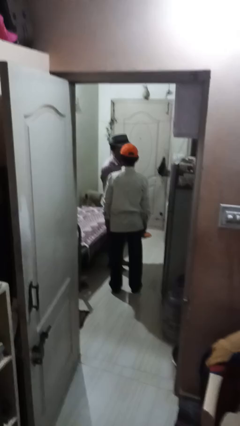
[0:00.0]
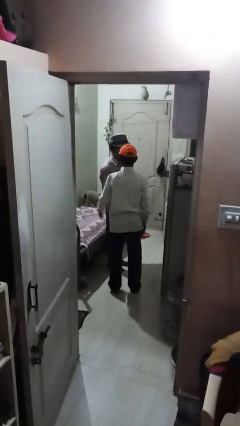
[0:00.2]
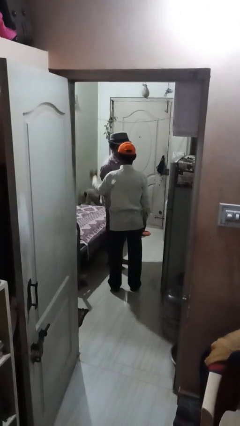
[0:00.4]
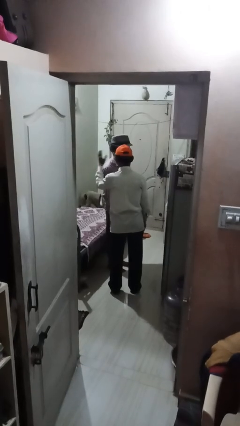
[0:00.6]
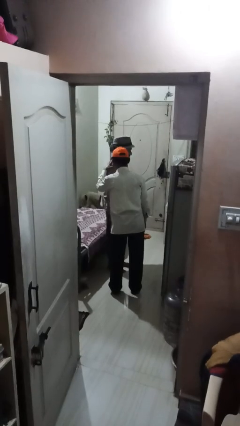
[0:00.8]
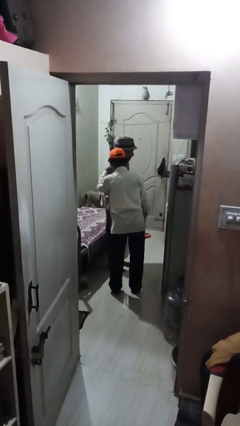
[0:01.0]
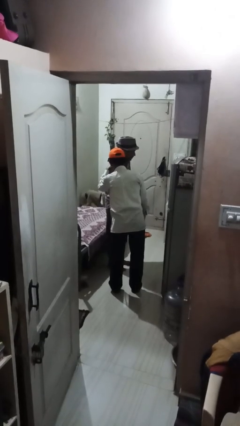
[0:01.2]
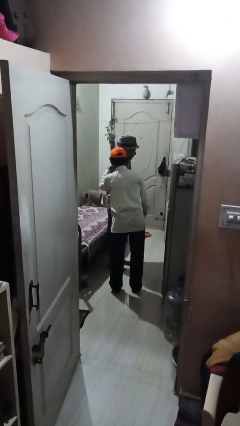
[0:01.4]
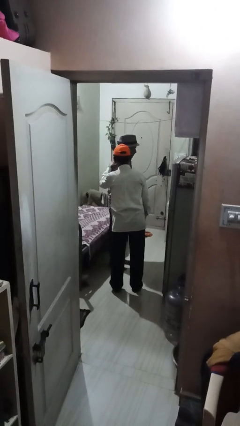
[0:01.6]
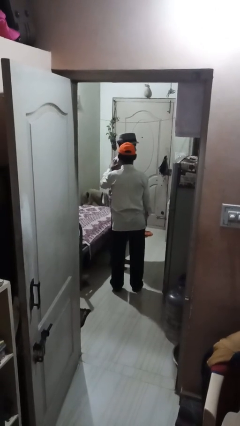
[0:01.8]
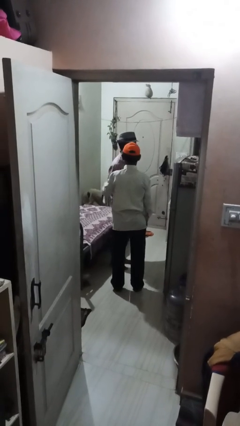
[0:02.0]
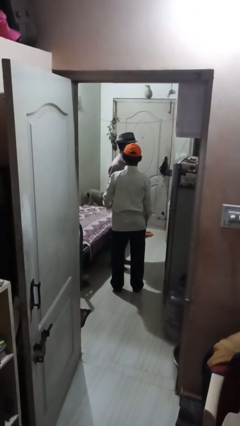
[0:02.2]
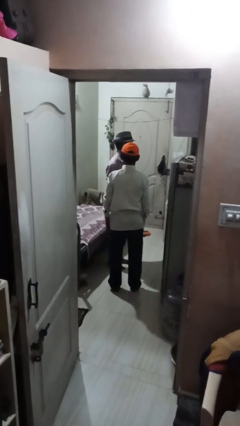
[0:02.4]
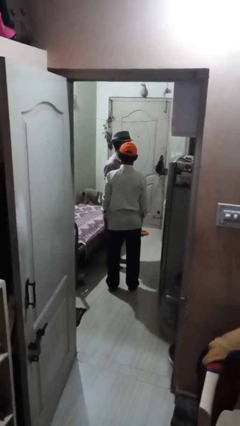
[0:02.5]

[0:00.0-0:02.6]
person pounds shoulders of person

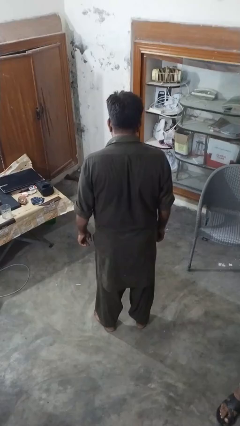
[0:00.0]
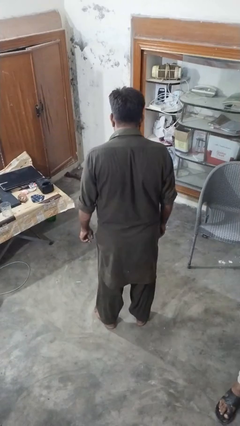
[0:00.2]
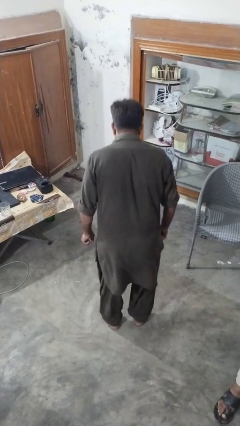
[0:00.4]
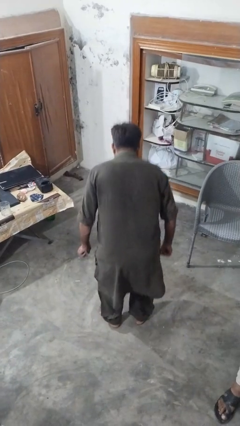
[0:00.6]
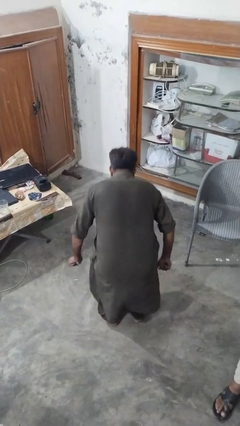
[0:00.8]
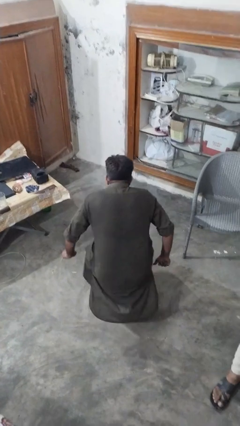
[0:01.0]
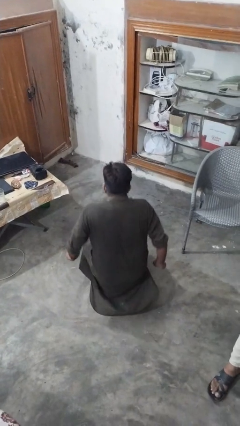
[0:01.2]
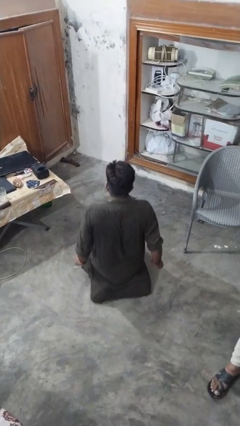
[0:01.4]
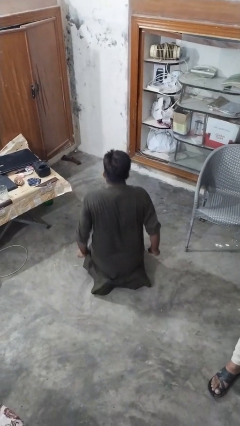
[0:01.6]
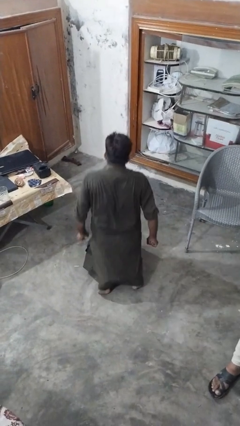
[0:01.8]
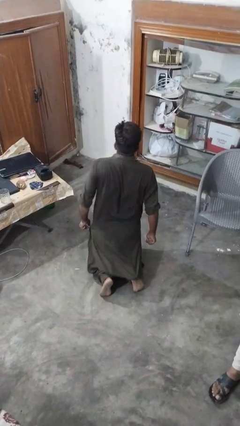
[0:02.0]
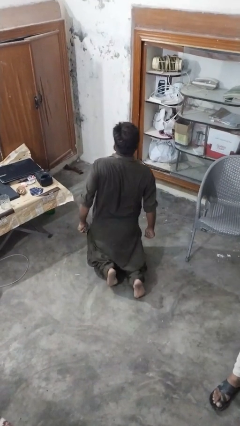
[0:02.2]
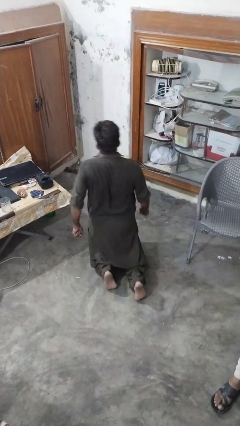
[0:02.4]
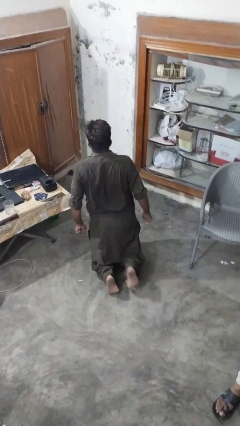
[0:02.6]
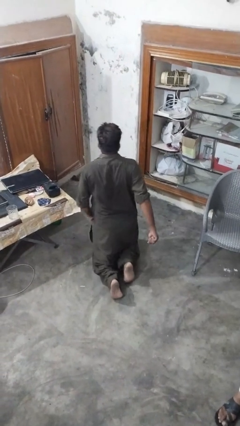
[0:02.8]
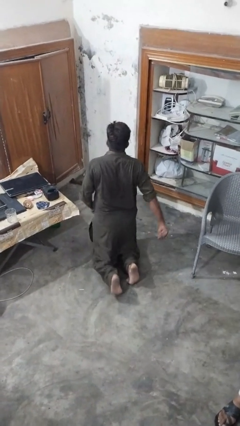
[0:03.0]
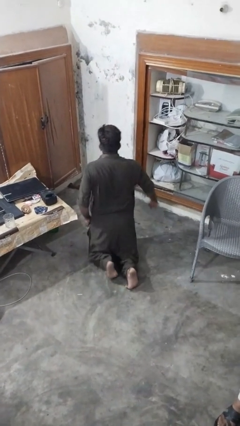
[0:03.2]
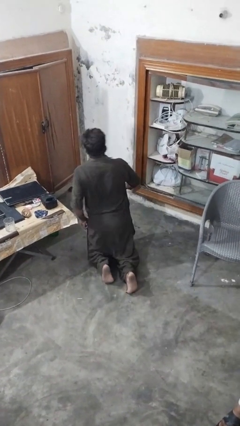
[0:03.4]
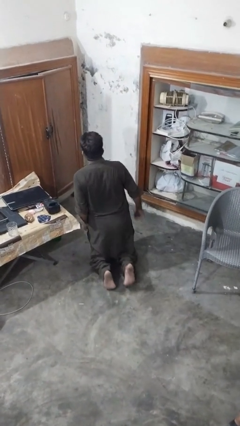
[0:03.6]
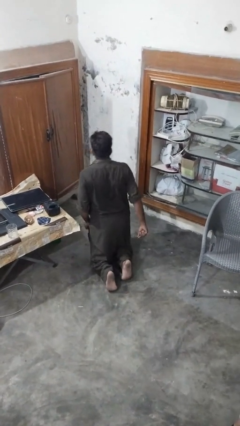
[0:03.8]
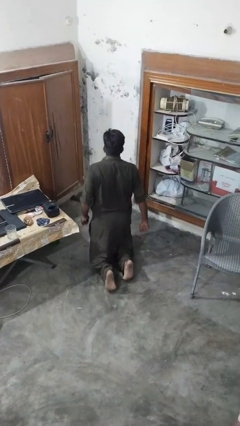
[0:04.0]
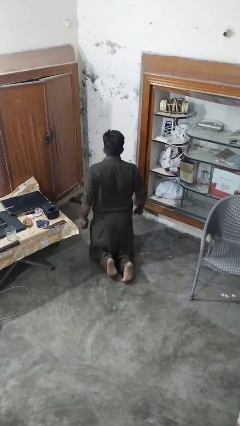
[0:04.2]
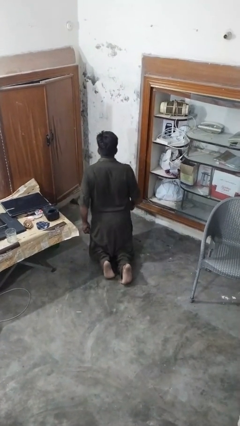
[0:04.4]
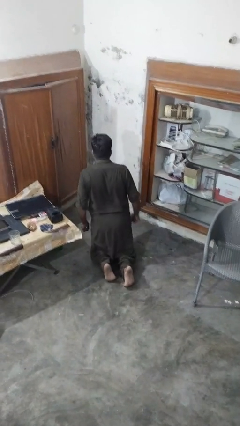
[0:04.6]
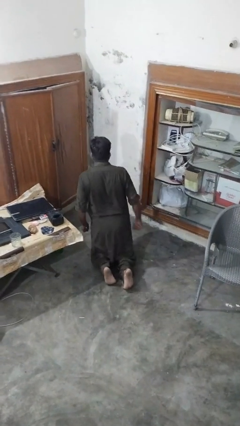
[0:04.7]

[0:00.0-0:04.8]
person exercises with lunges

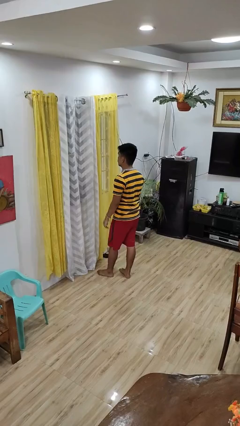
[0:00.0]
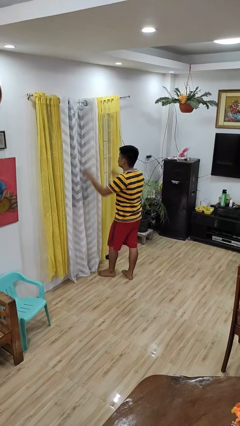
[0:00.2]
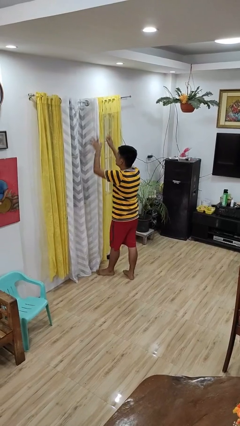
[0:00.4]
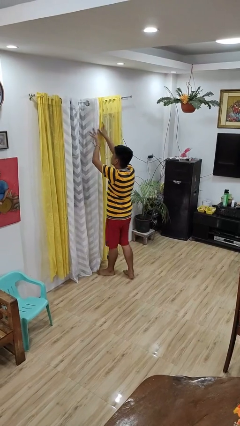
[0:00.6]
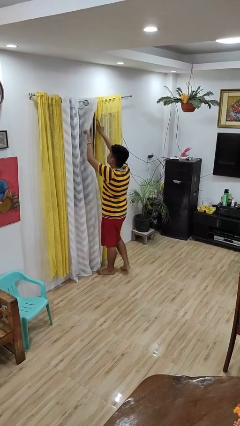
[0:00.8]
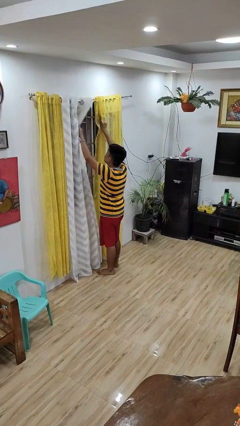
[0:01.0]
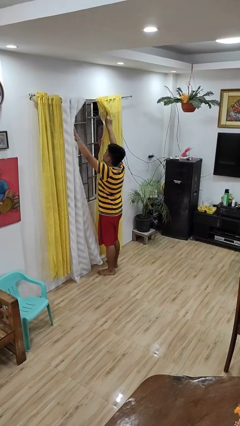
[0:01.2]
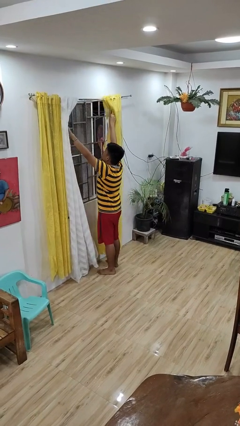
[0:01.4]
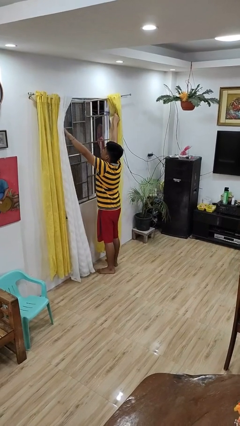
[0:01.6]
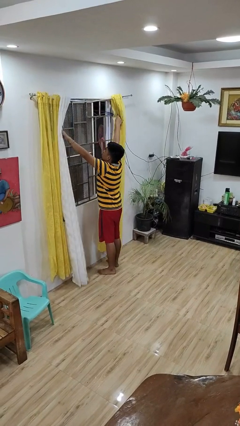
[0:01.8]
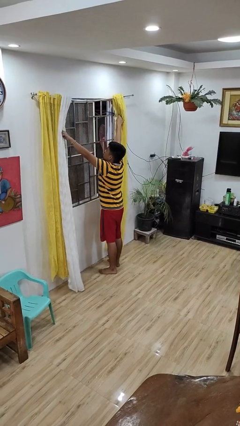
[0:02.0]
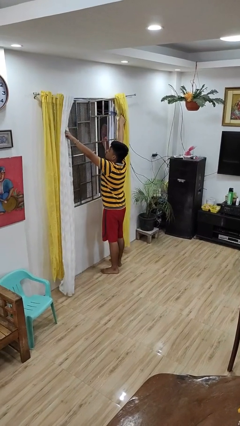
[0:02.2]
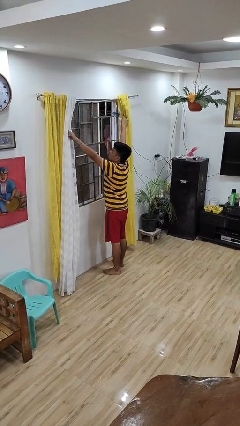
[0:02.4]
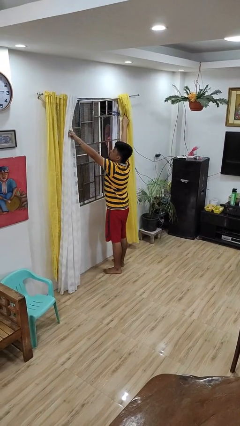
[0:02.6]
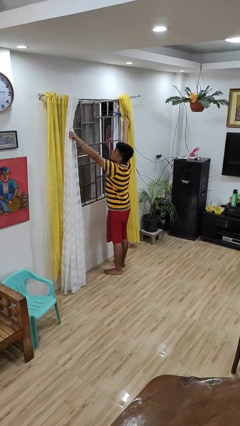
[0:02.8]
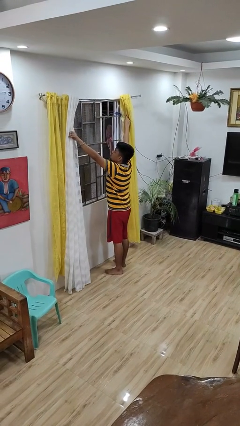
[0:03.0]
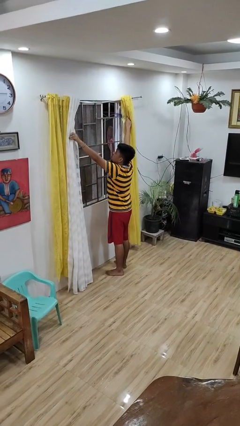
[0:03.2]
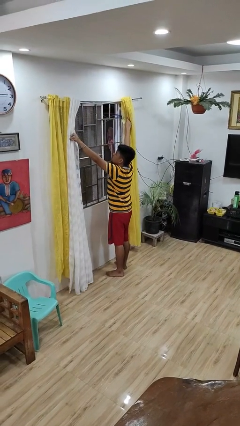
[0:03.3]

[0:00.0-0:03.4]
person opens curtains

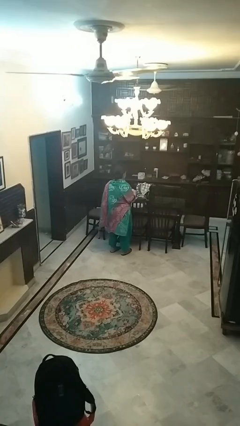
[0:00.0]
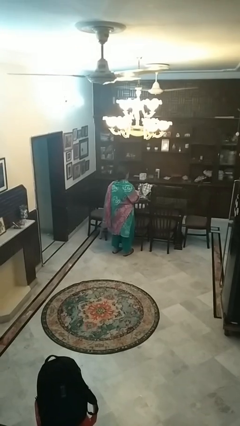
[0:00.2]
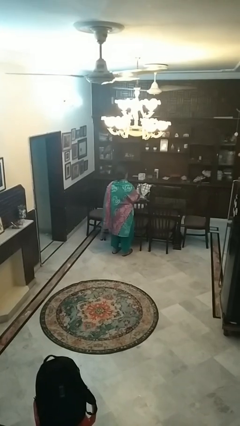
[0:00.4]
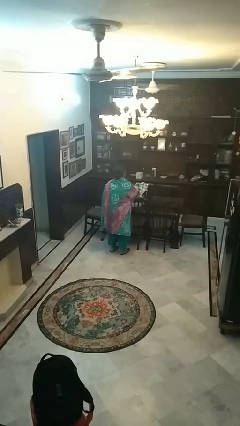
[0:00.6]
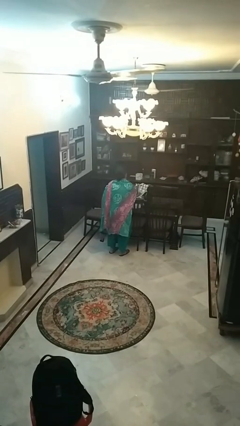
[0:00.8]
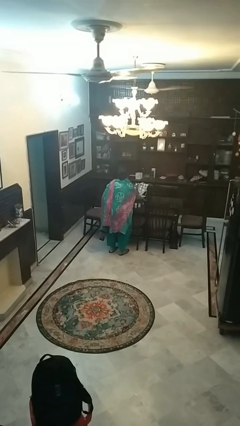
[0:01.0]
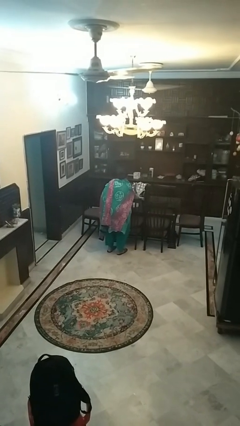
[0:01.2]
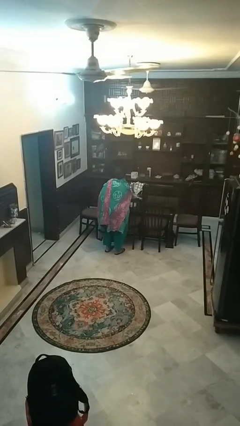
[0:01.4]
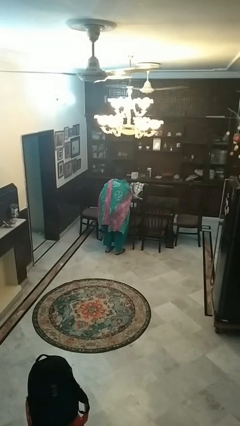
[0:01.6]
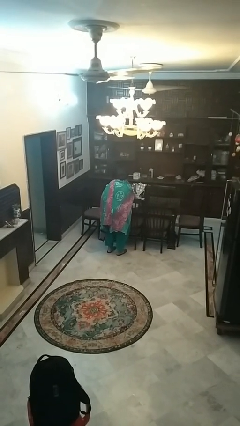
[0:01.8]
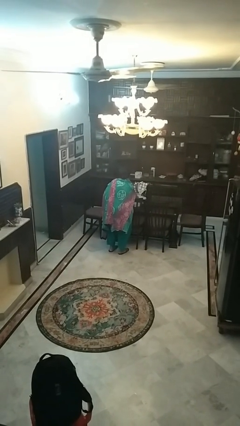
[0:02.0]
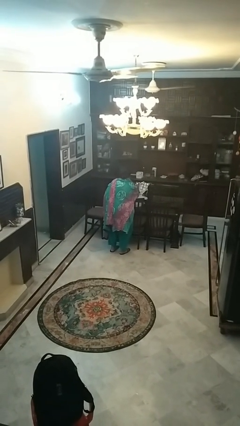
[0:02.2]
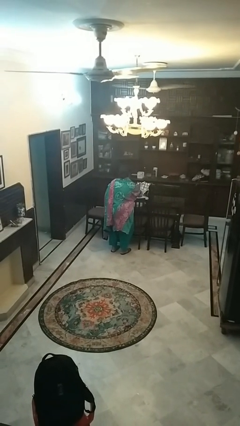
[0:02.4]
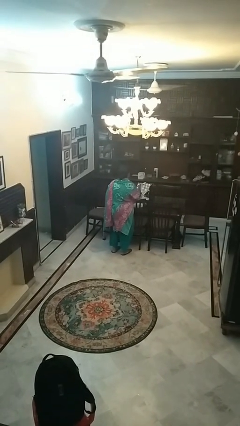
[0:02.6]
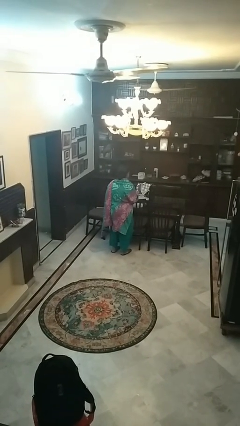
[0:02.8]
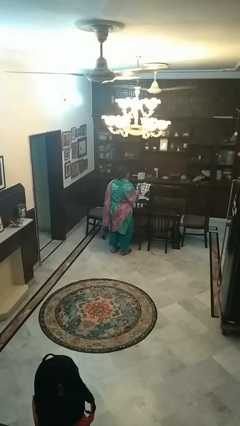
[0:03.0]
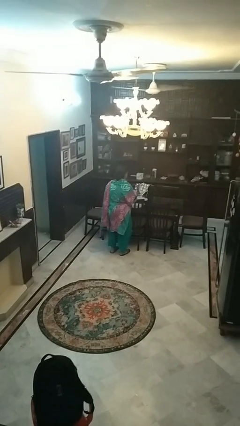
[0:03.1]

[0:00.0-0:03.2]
person sets table

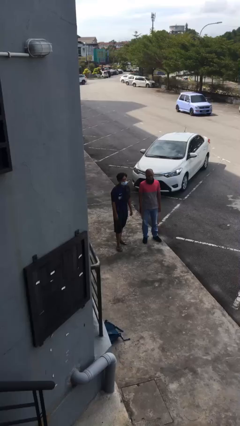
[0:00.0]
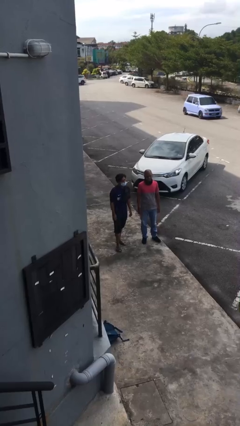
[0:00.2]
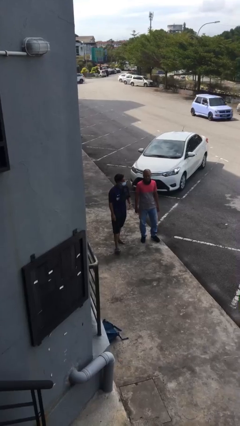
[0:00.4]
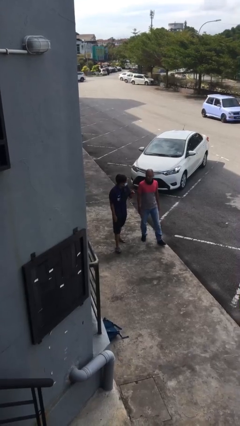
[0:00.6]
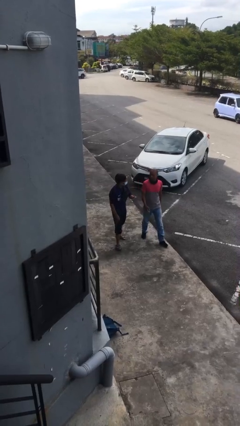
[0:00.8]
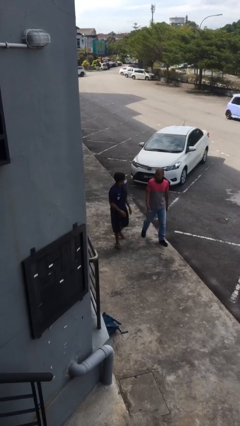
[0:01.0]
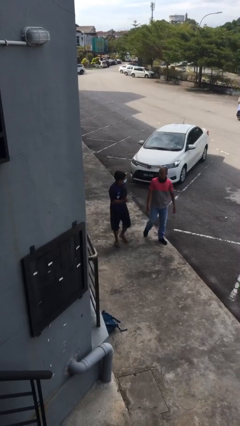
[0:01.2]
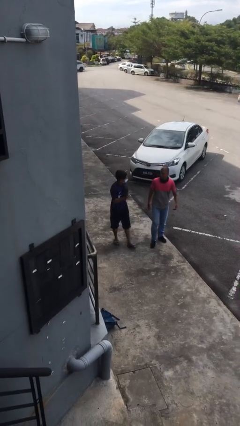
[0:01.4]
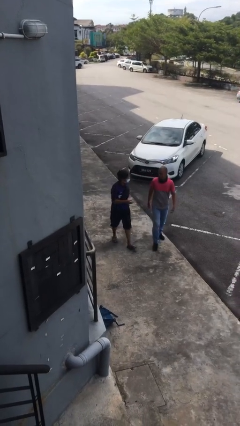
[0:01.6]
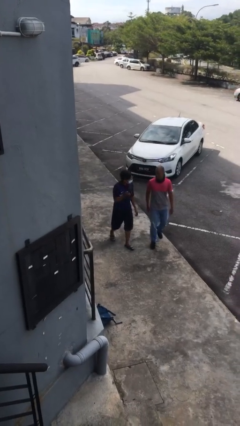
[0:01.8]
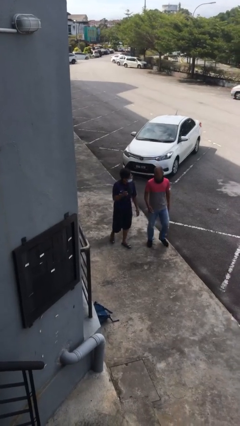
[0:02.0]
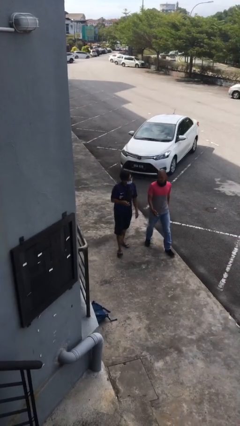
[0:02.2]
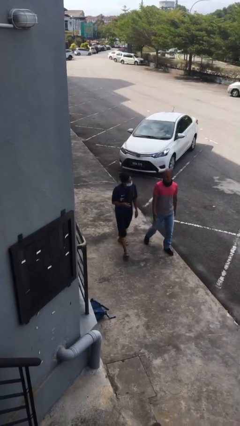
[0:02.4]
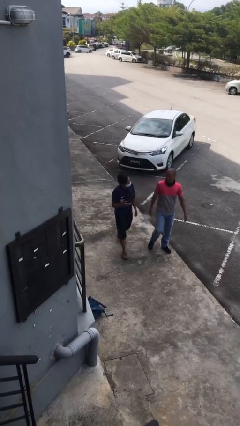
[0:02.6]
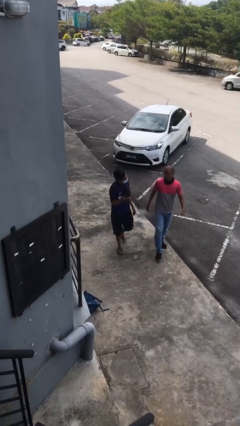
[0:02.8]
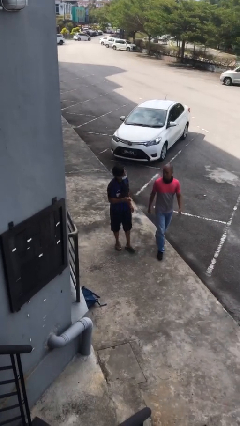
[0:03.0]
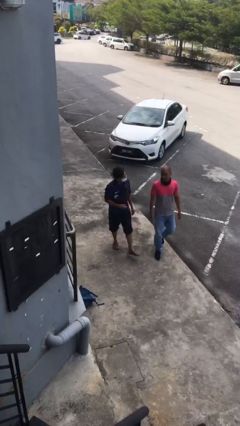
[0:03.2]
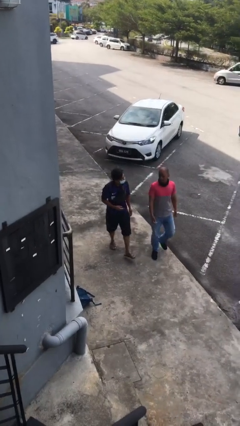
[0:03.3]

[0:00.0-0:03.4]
person talks to person
